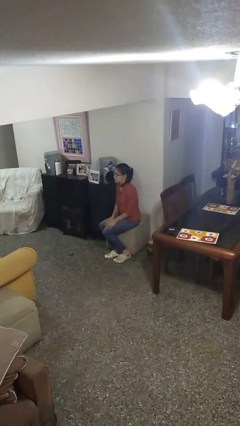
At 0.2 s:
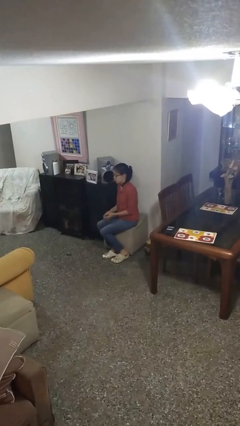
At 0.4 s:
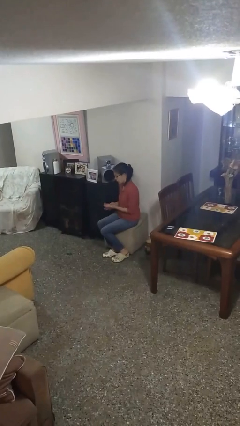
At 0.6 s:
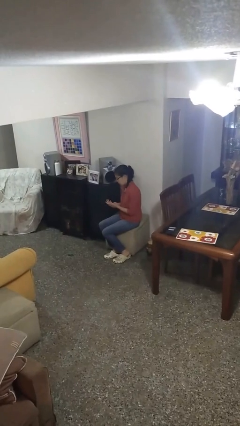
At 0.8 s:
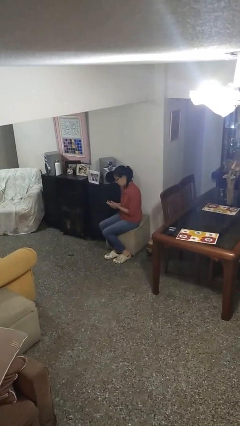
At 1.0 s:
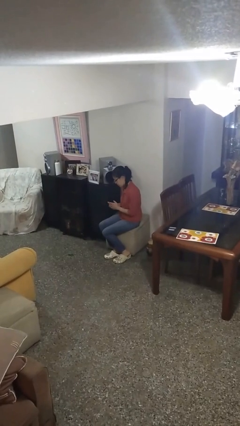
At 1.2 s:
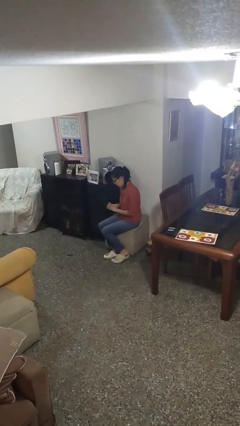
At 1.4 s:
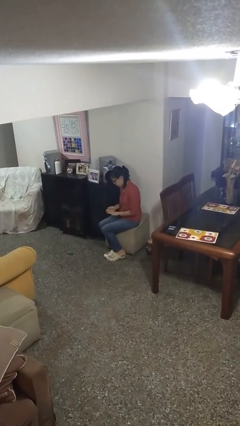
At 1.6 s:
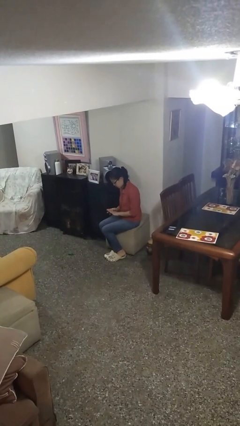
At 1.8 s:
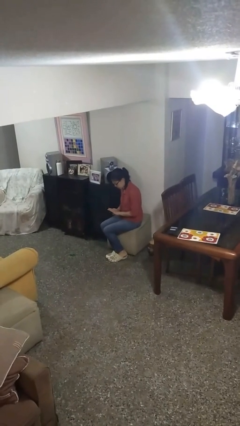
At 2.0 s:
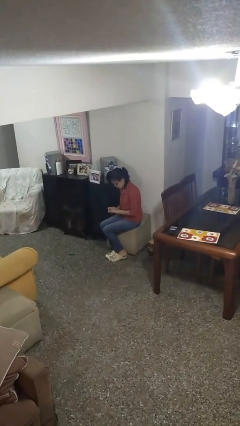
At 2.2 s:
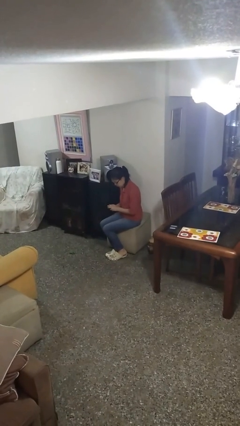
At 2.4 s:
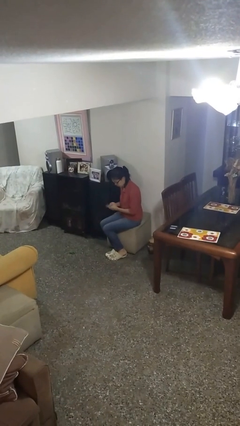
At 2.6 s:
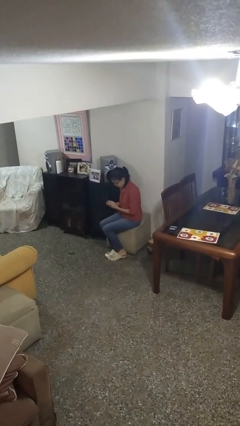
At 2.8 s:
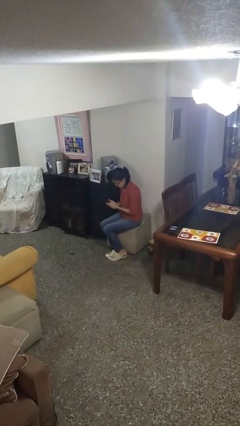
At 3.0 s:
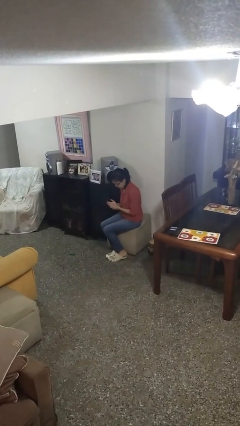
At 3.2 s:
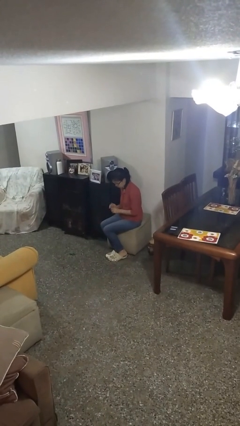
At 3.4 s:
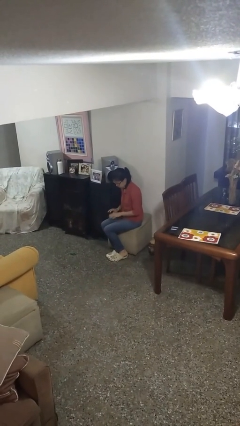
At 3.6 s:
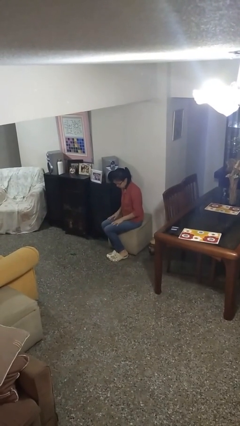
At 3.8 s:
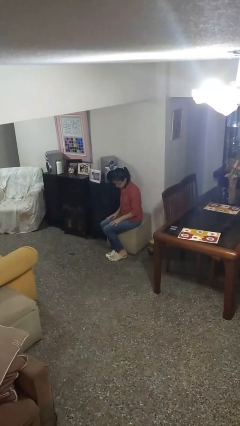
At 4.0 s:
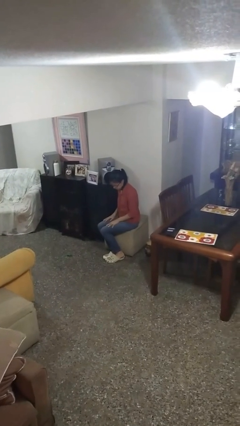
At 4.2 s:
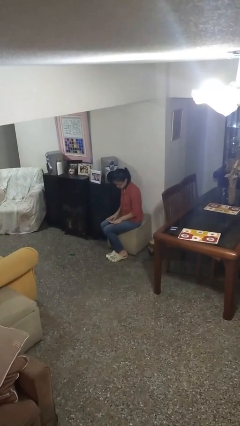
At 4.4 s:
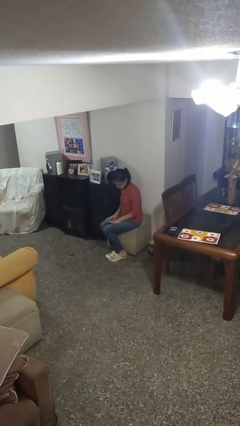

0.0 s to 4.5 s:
person looks at hands in lap

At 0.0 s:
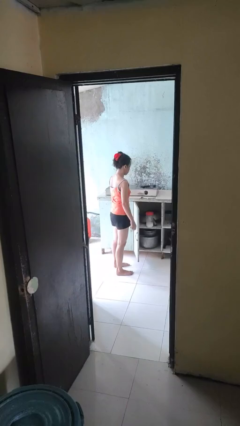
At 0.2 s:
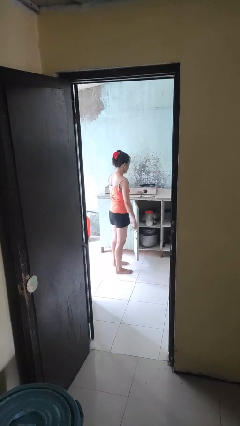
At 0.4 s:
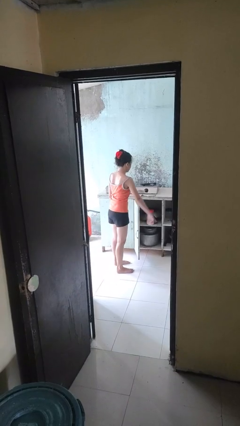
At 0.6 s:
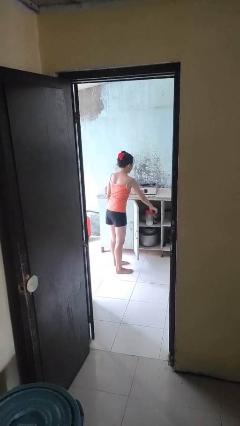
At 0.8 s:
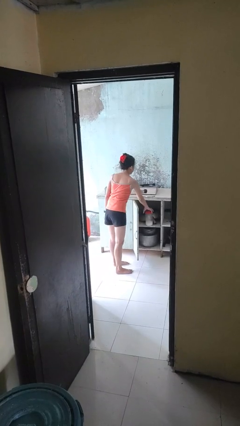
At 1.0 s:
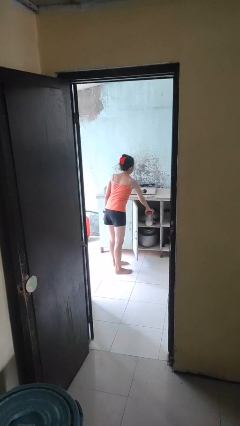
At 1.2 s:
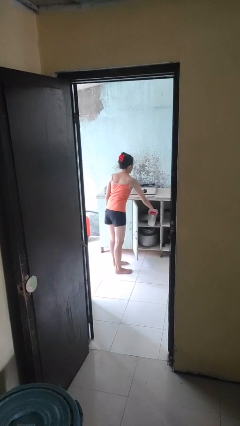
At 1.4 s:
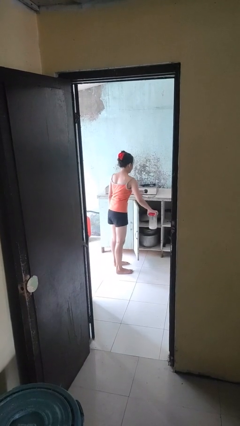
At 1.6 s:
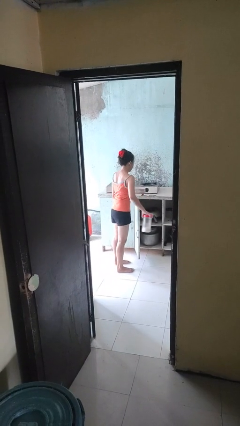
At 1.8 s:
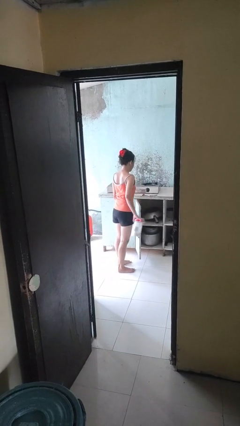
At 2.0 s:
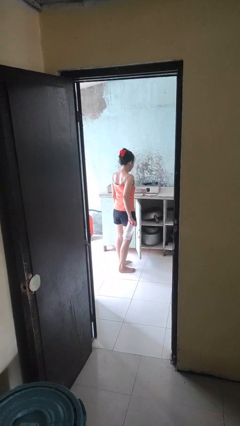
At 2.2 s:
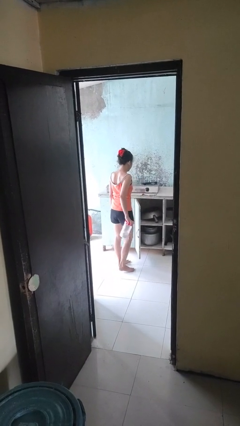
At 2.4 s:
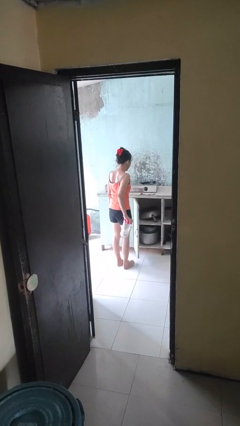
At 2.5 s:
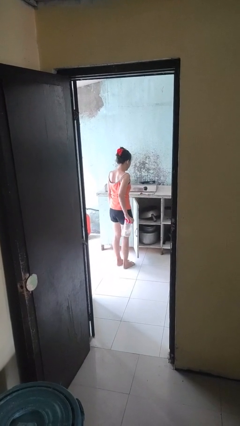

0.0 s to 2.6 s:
person picks up object from cabinet

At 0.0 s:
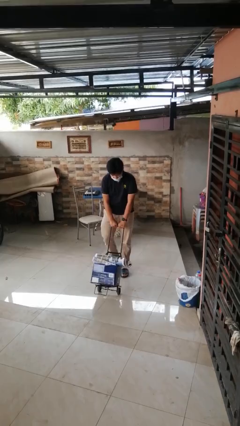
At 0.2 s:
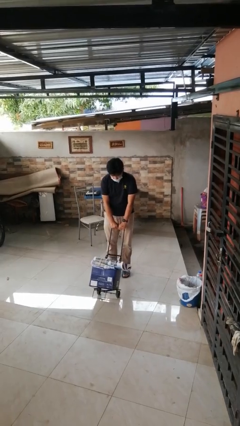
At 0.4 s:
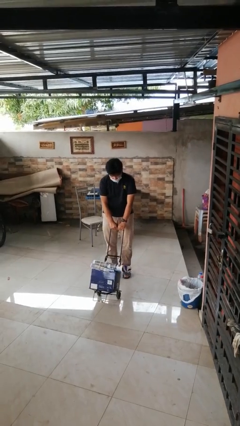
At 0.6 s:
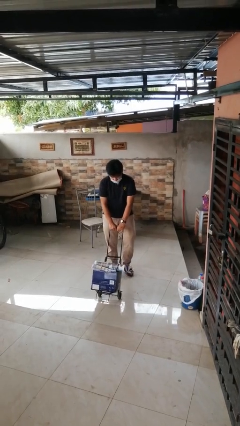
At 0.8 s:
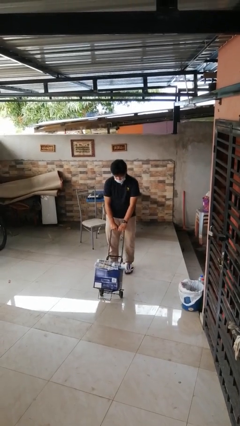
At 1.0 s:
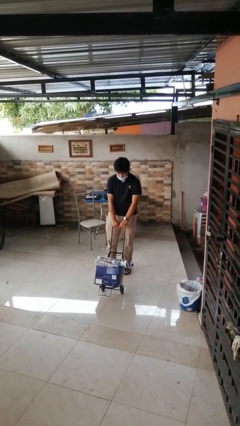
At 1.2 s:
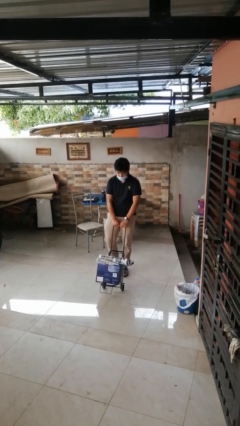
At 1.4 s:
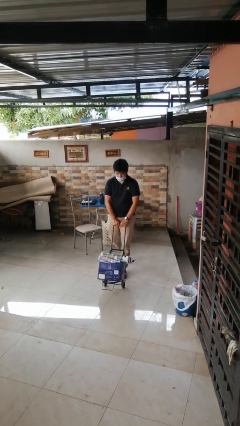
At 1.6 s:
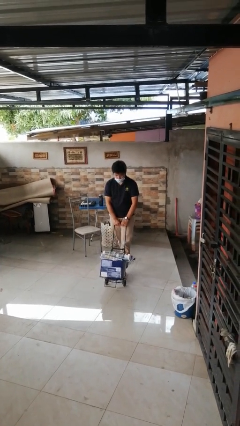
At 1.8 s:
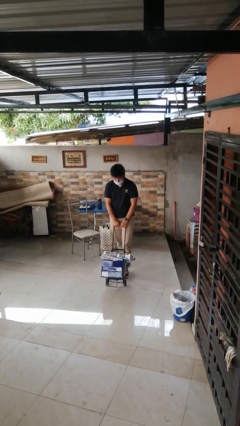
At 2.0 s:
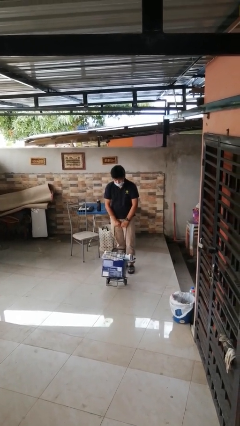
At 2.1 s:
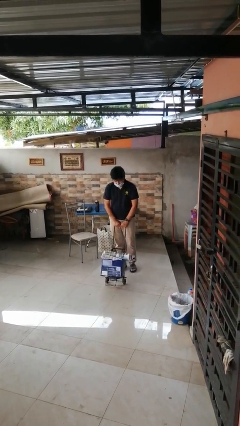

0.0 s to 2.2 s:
person pulls wheeled cart

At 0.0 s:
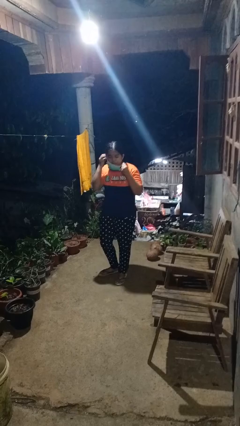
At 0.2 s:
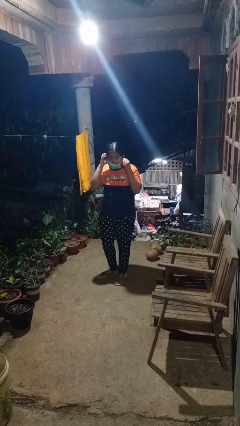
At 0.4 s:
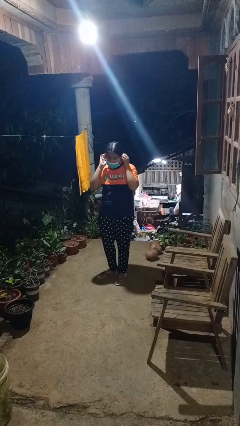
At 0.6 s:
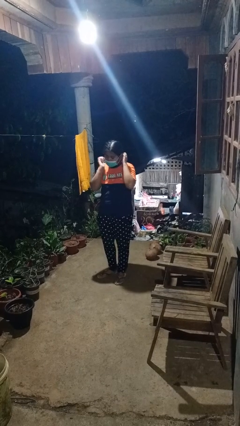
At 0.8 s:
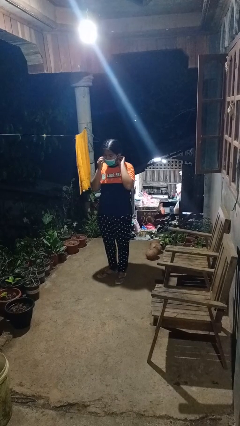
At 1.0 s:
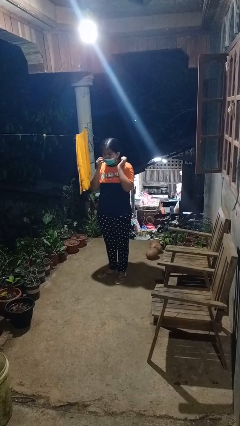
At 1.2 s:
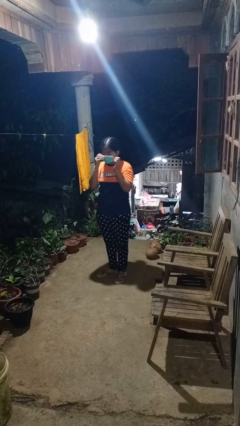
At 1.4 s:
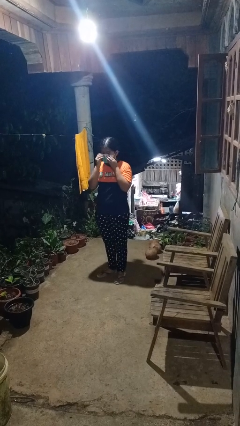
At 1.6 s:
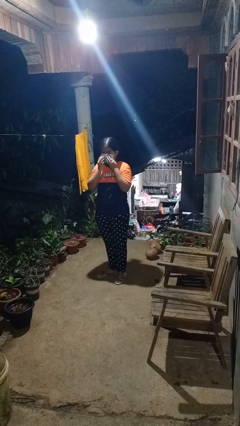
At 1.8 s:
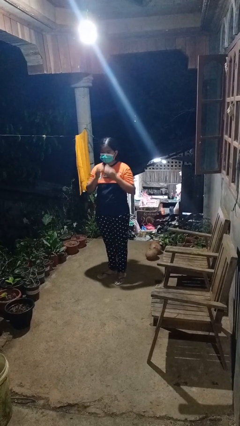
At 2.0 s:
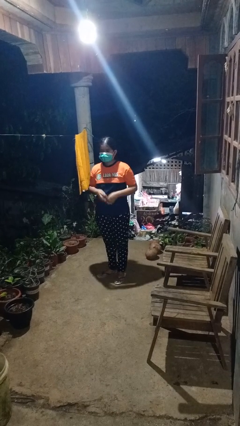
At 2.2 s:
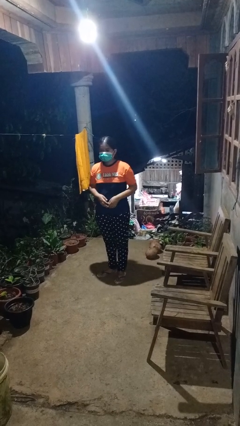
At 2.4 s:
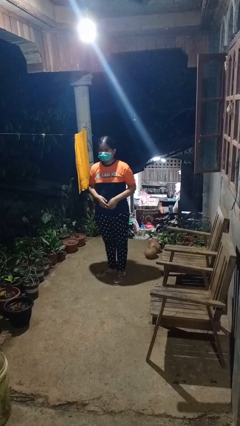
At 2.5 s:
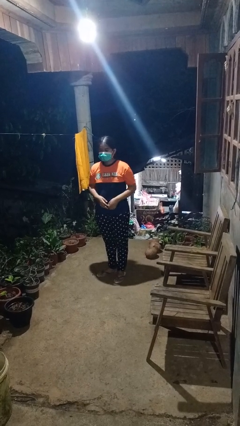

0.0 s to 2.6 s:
person puts on facemask

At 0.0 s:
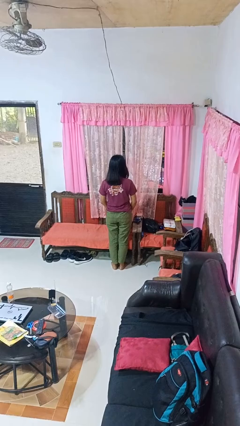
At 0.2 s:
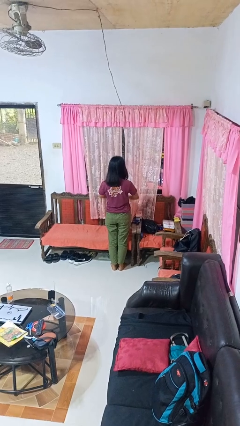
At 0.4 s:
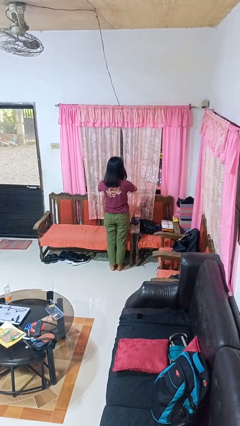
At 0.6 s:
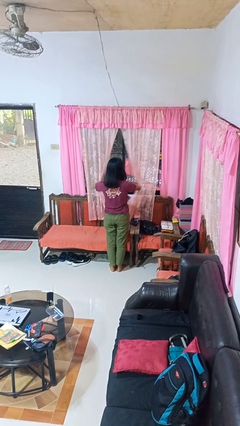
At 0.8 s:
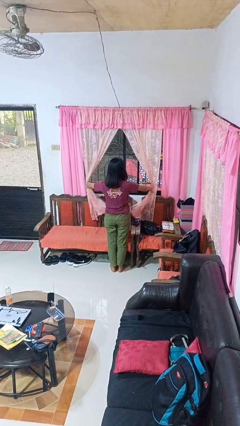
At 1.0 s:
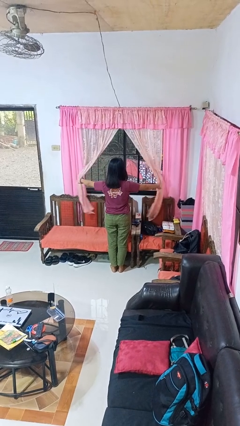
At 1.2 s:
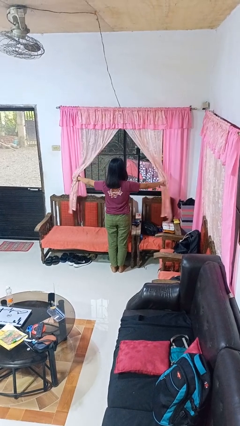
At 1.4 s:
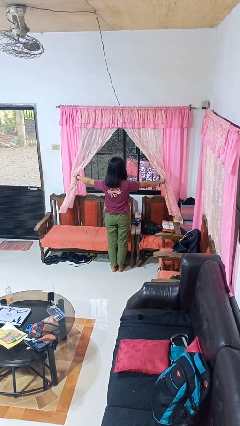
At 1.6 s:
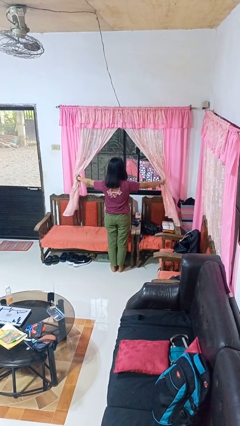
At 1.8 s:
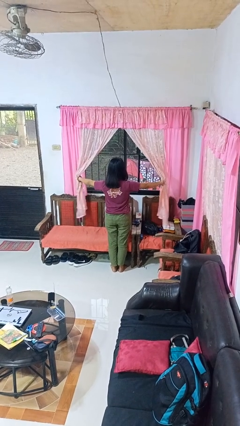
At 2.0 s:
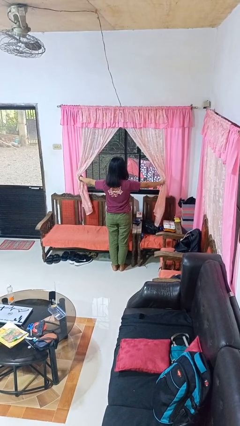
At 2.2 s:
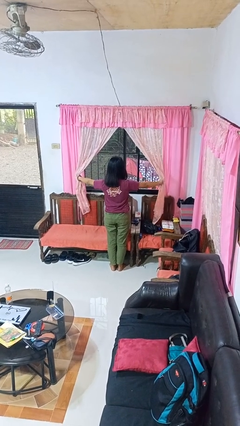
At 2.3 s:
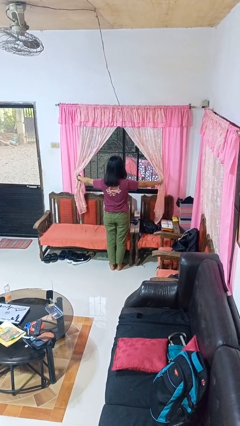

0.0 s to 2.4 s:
person opens curtains

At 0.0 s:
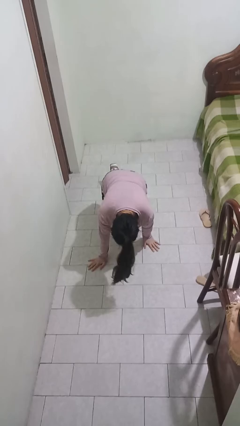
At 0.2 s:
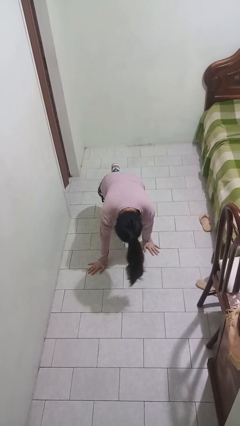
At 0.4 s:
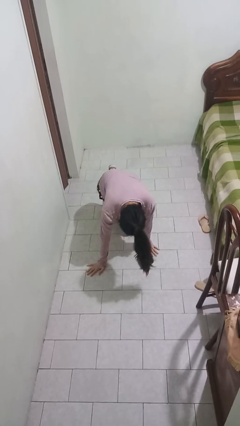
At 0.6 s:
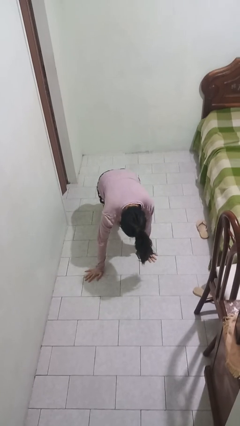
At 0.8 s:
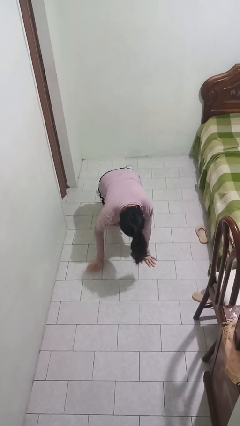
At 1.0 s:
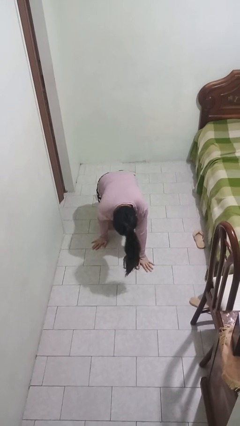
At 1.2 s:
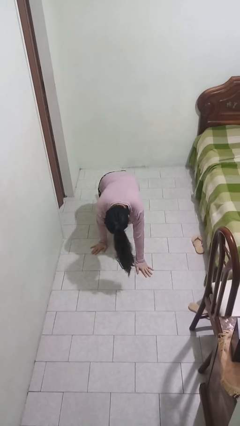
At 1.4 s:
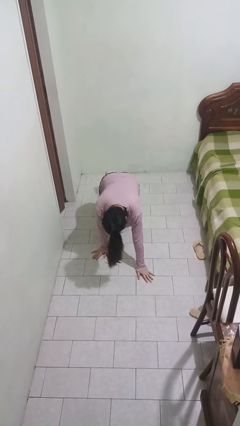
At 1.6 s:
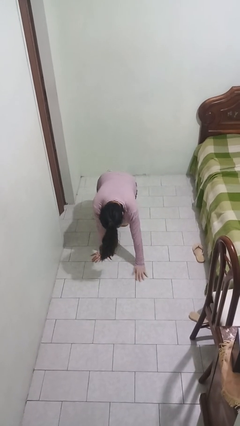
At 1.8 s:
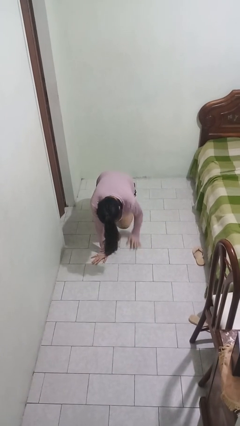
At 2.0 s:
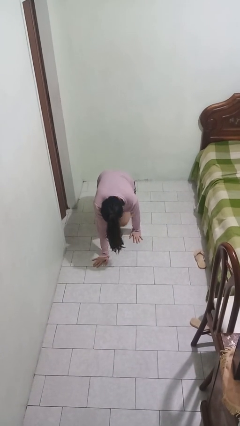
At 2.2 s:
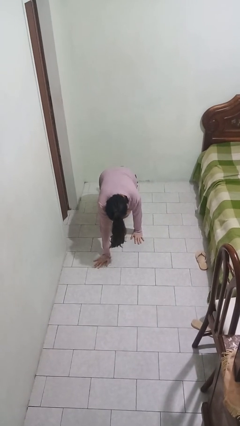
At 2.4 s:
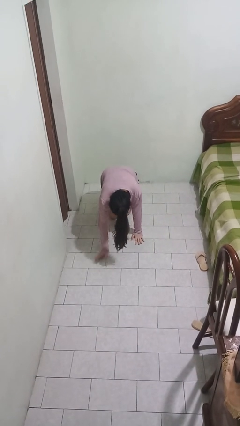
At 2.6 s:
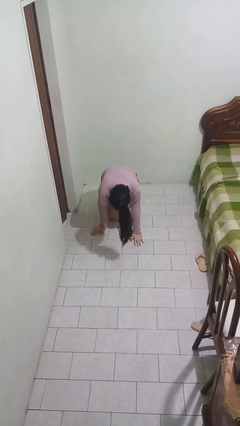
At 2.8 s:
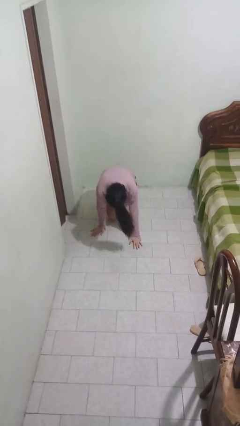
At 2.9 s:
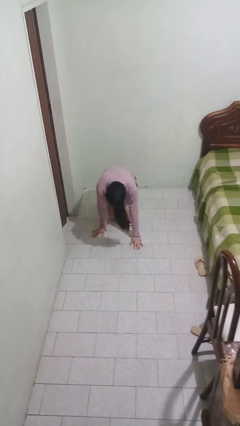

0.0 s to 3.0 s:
person crawls
